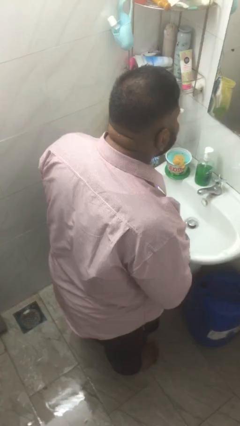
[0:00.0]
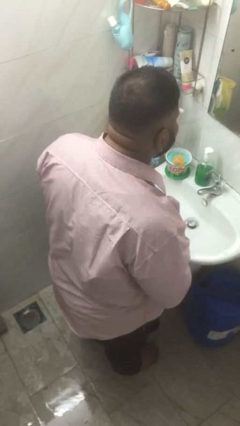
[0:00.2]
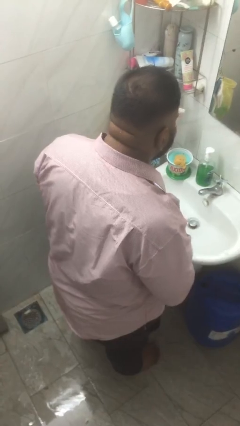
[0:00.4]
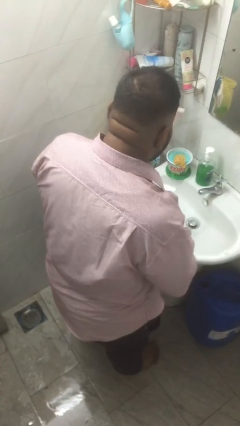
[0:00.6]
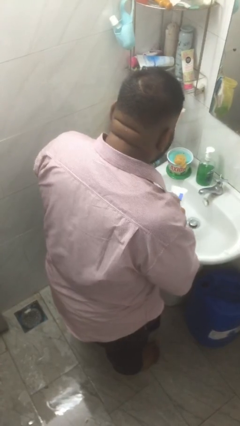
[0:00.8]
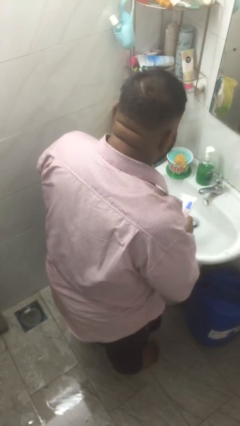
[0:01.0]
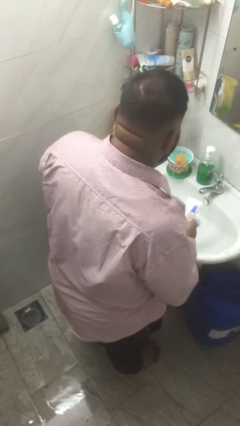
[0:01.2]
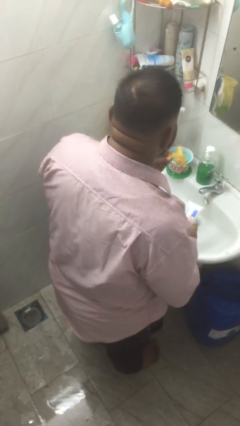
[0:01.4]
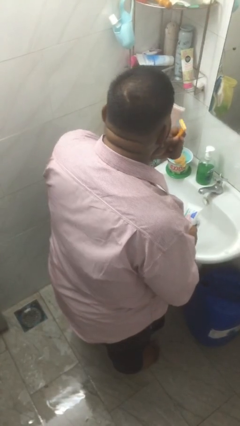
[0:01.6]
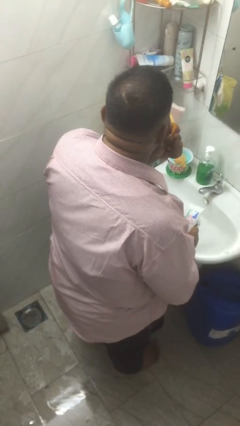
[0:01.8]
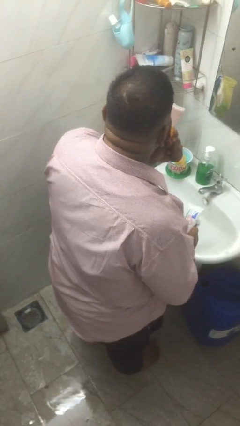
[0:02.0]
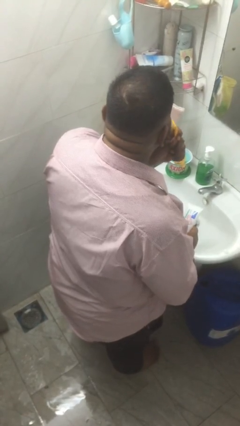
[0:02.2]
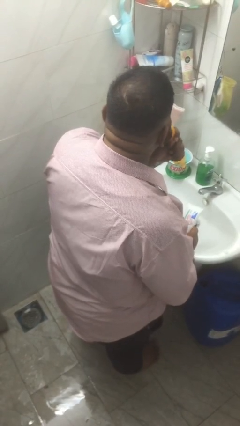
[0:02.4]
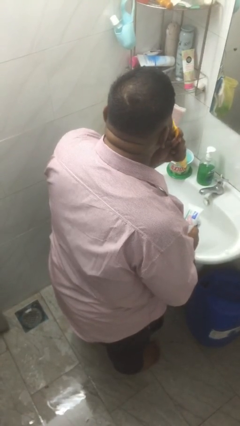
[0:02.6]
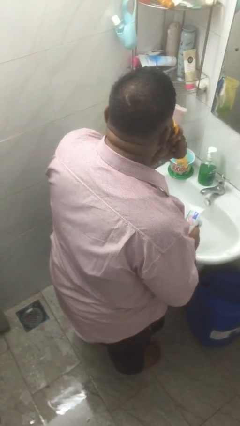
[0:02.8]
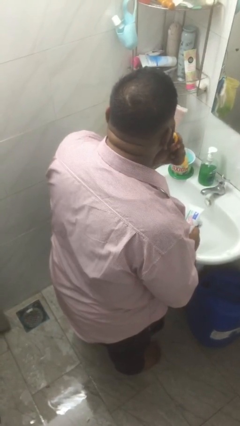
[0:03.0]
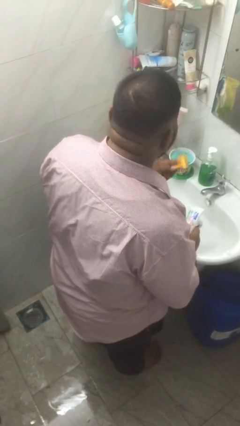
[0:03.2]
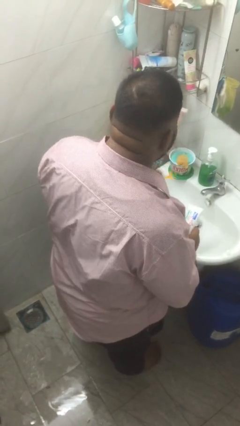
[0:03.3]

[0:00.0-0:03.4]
person shaves face

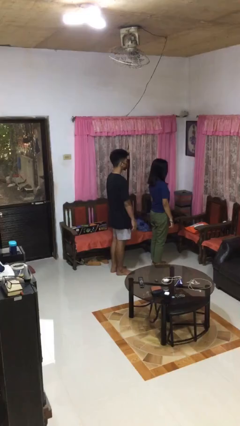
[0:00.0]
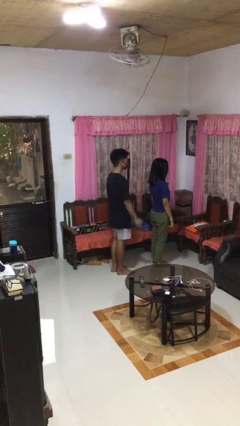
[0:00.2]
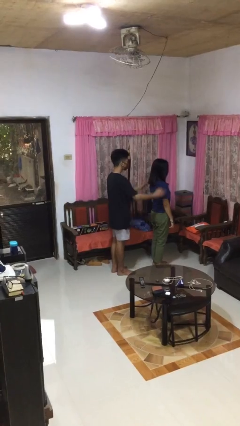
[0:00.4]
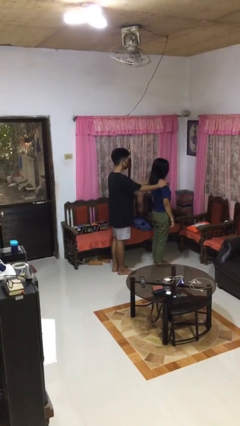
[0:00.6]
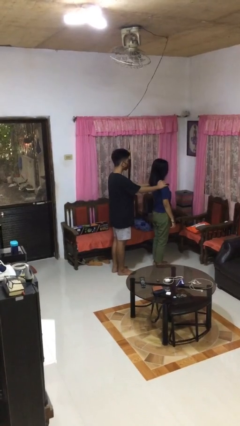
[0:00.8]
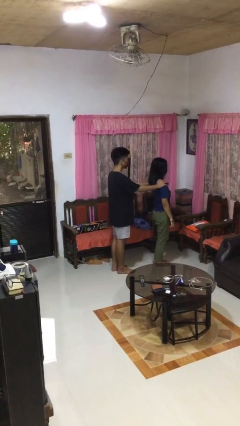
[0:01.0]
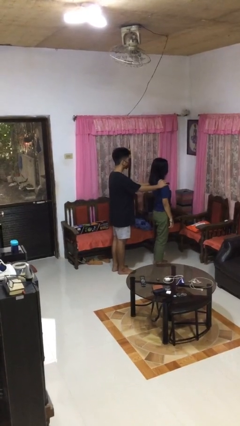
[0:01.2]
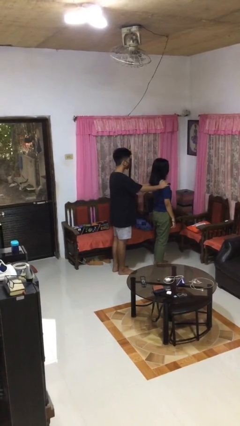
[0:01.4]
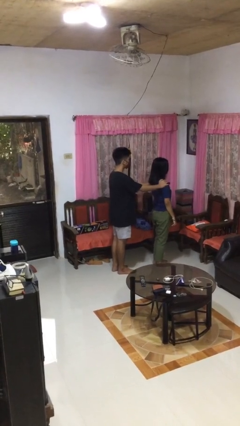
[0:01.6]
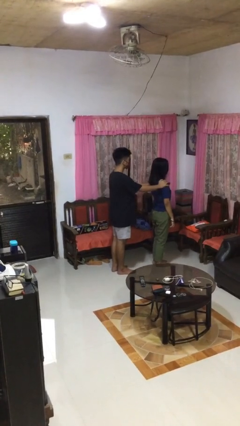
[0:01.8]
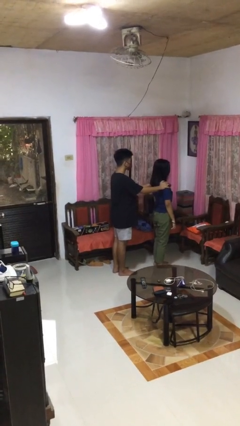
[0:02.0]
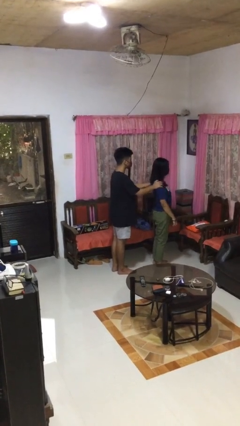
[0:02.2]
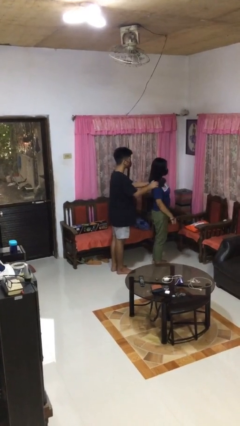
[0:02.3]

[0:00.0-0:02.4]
person grabs person by shoulder

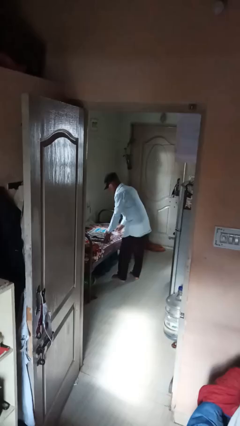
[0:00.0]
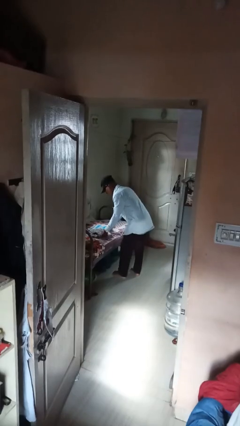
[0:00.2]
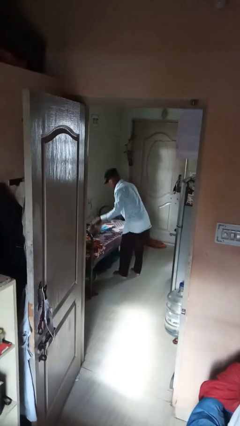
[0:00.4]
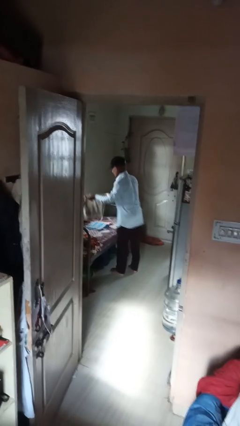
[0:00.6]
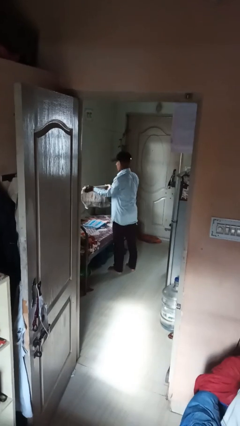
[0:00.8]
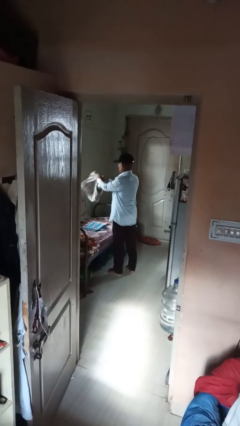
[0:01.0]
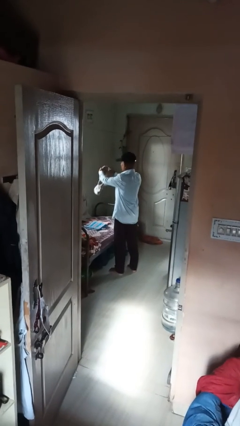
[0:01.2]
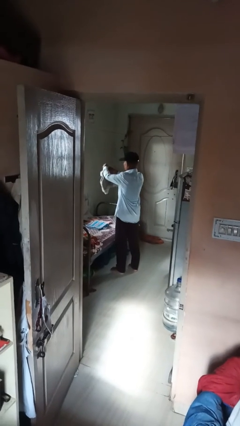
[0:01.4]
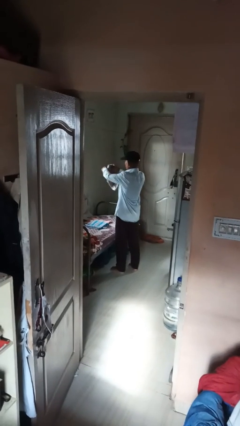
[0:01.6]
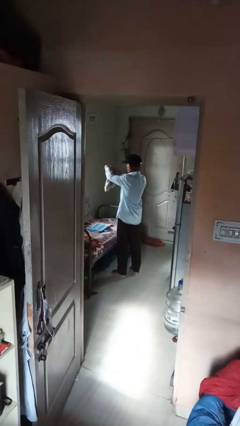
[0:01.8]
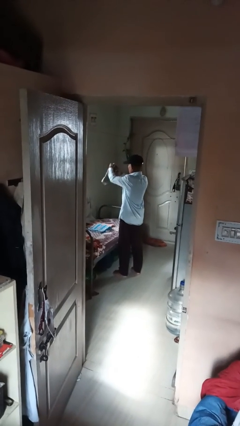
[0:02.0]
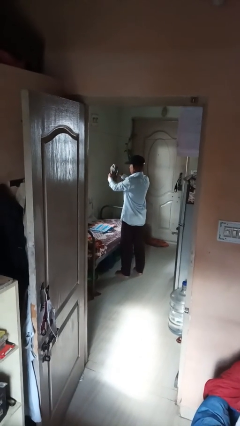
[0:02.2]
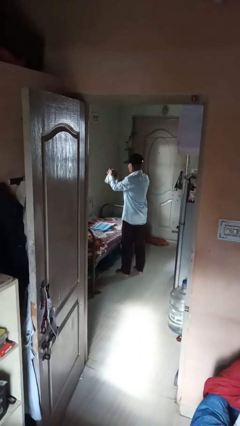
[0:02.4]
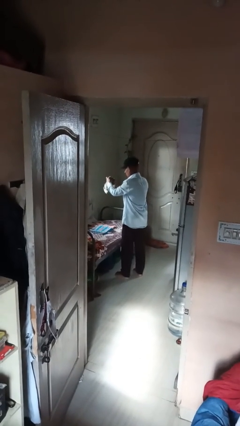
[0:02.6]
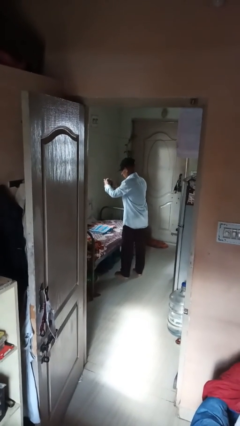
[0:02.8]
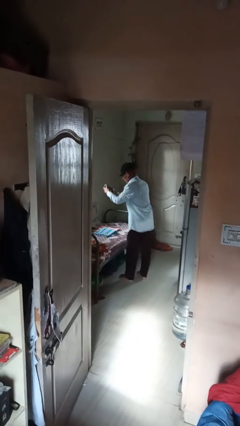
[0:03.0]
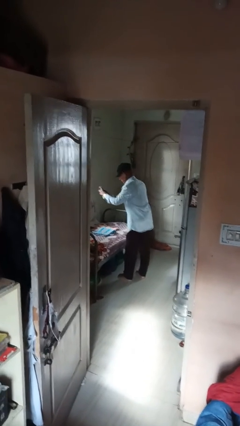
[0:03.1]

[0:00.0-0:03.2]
person folds towel

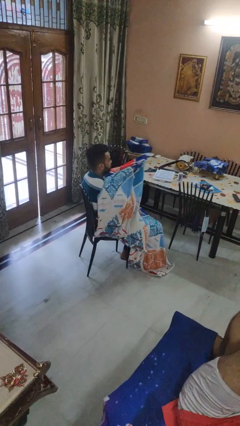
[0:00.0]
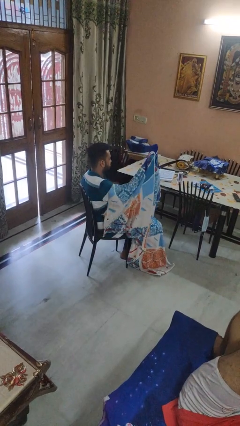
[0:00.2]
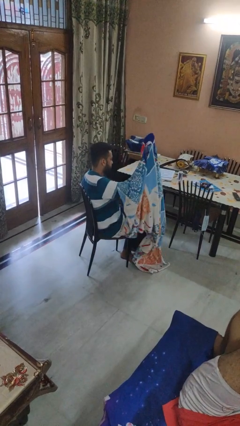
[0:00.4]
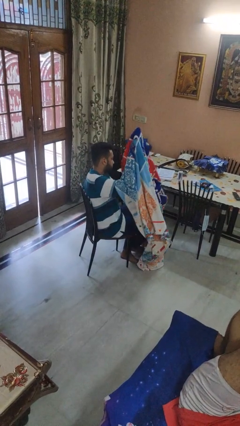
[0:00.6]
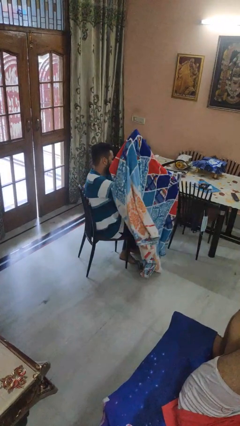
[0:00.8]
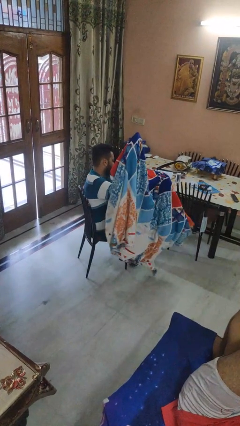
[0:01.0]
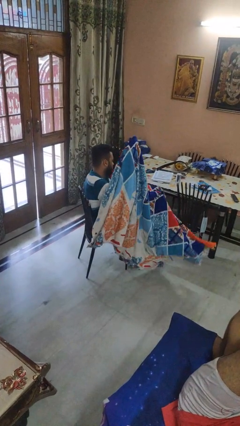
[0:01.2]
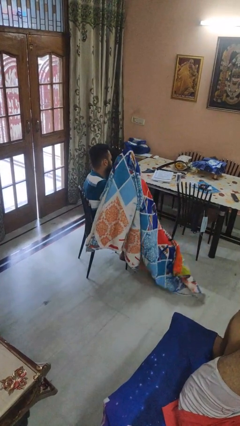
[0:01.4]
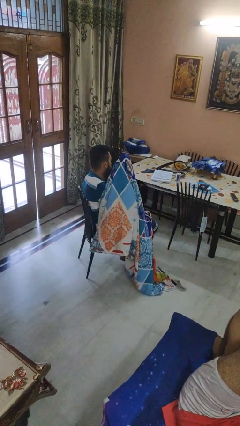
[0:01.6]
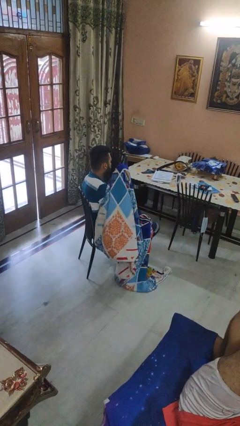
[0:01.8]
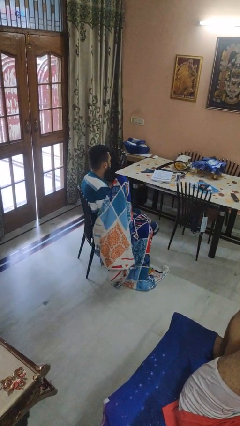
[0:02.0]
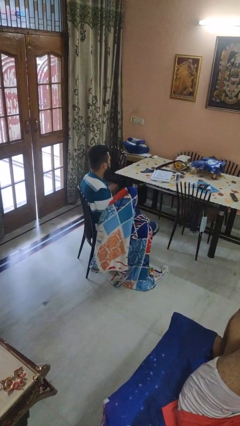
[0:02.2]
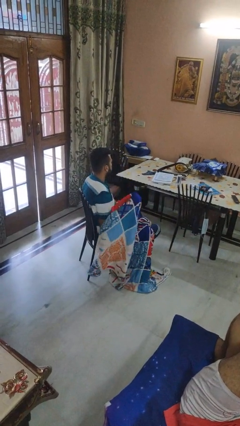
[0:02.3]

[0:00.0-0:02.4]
person uncovers with blanket

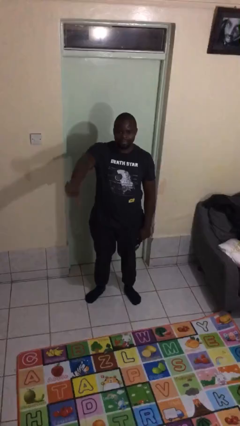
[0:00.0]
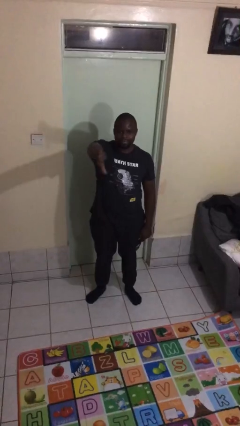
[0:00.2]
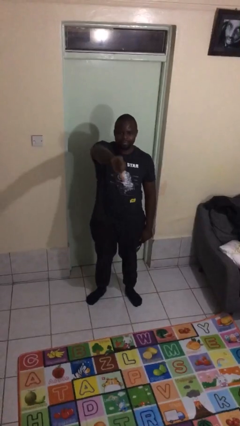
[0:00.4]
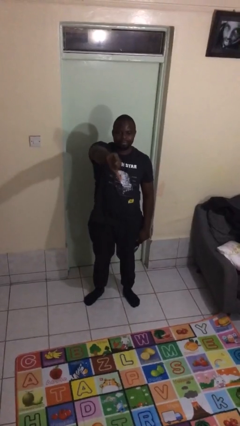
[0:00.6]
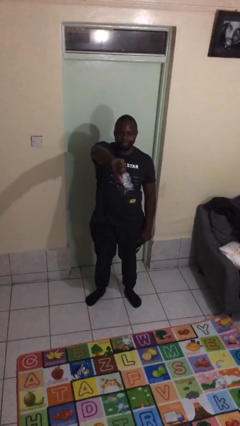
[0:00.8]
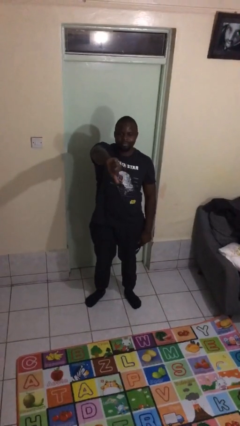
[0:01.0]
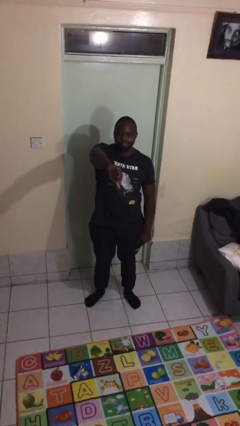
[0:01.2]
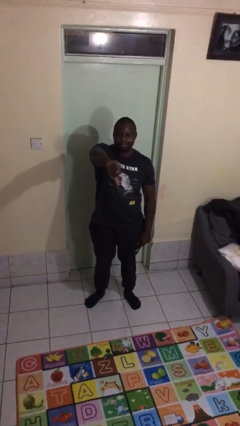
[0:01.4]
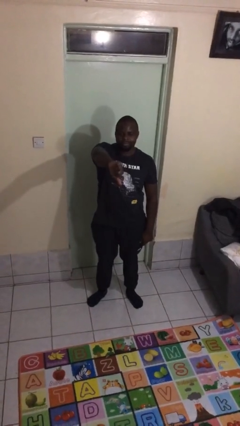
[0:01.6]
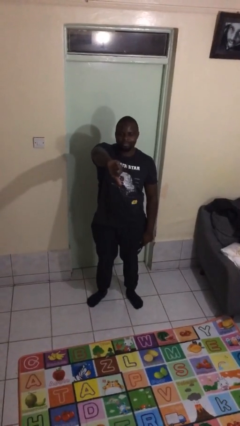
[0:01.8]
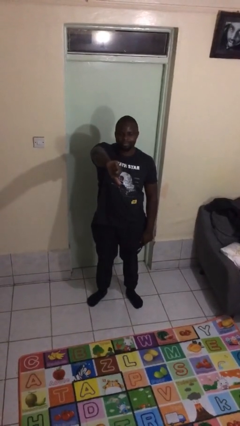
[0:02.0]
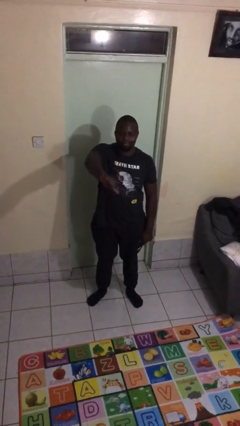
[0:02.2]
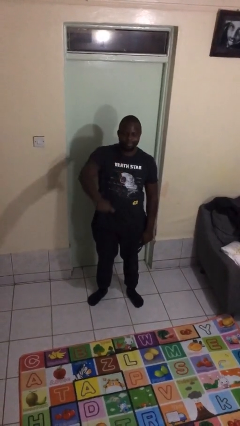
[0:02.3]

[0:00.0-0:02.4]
person gestures thumbs down

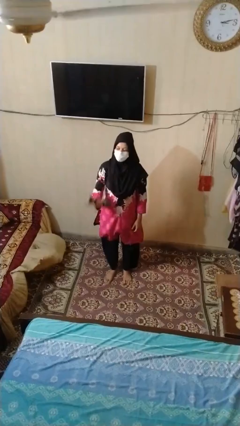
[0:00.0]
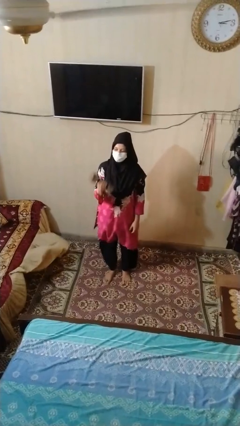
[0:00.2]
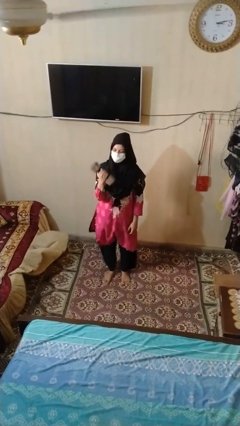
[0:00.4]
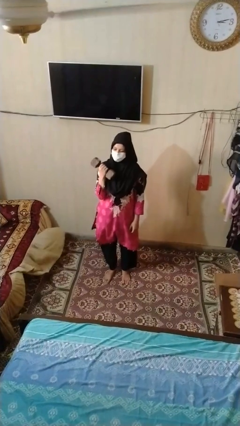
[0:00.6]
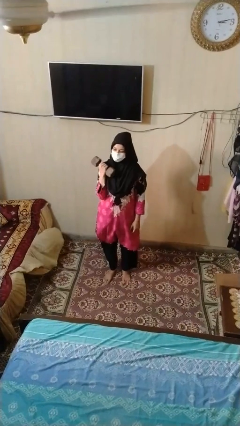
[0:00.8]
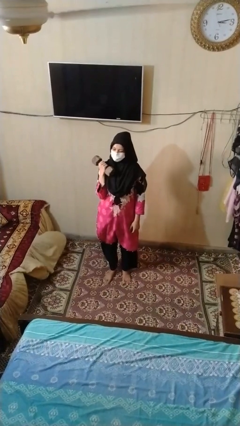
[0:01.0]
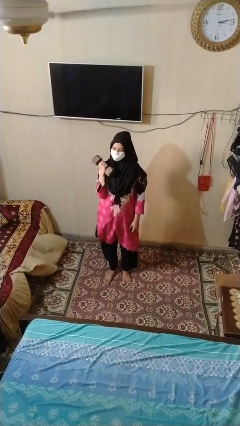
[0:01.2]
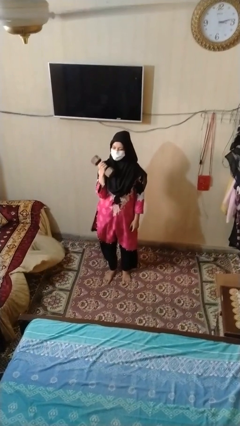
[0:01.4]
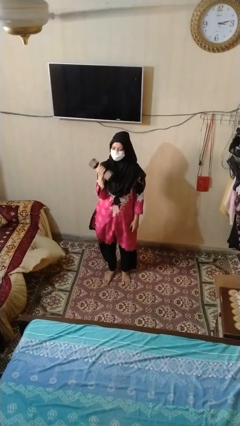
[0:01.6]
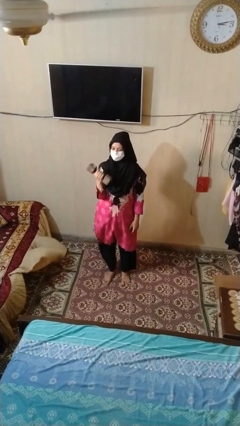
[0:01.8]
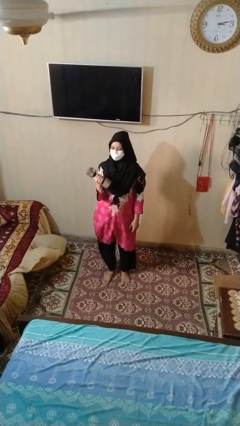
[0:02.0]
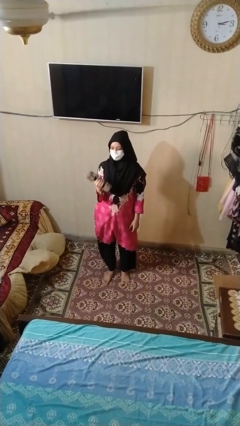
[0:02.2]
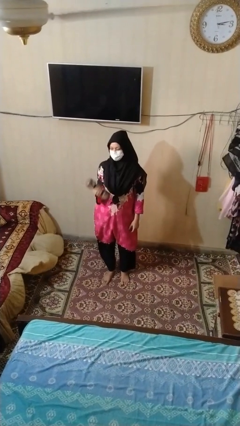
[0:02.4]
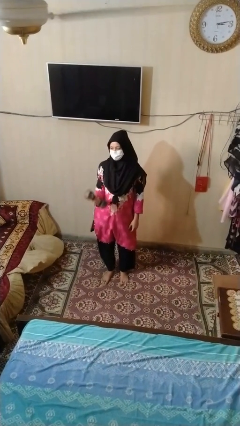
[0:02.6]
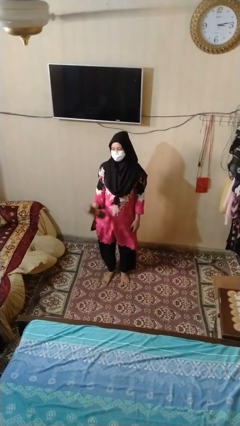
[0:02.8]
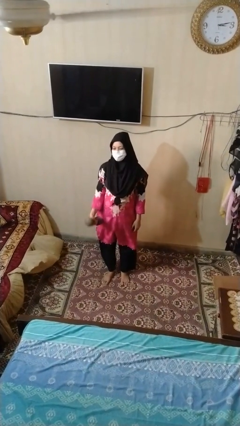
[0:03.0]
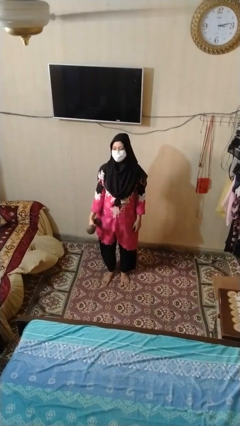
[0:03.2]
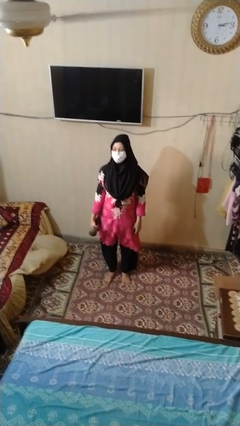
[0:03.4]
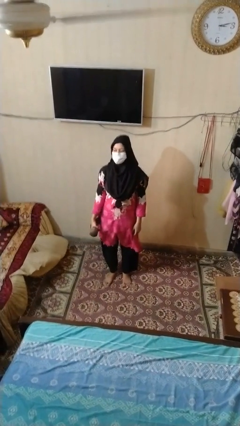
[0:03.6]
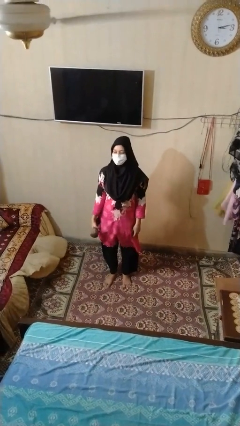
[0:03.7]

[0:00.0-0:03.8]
person lifts dumbbells
